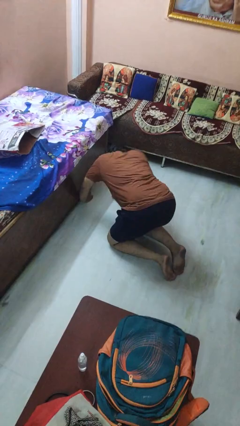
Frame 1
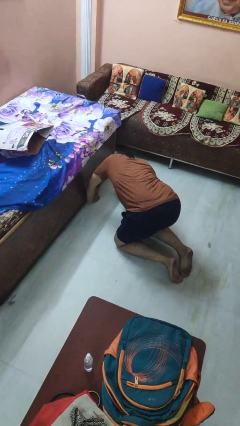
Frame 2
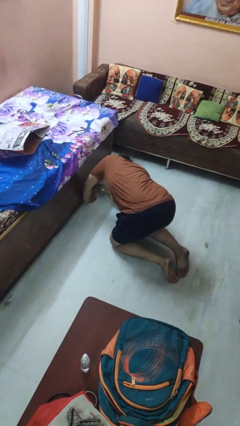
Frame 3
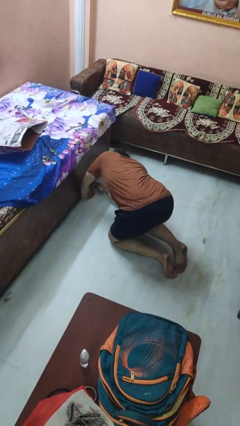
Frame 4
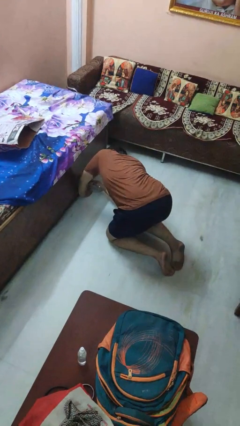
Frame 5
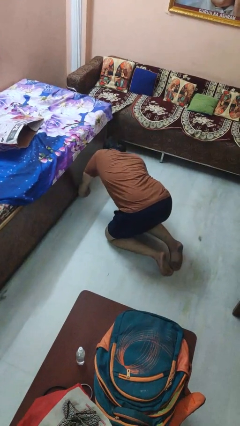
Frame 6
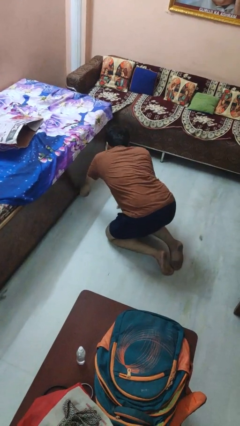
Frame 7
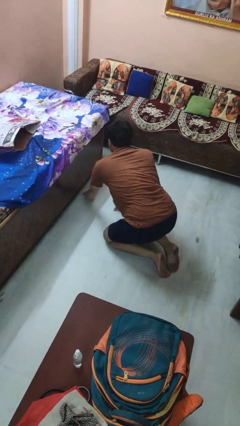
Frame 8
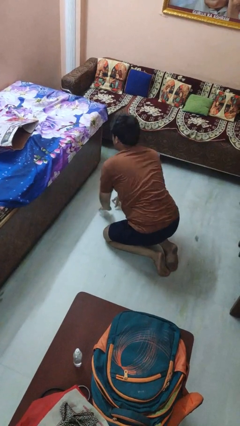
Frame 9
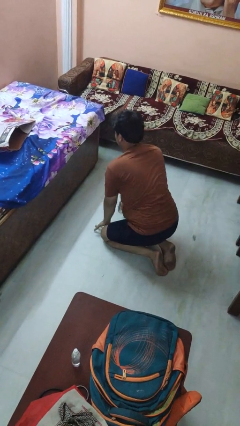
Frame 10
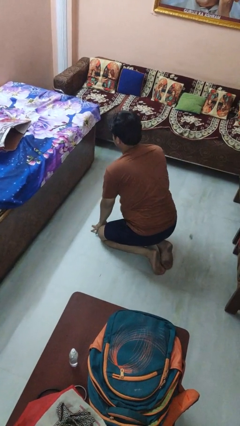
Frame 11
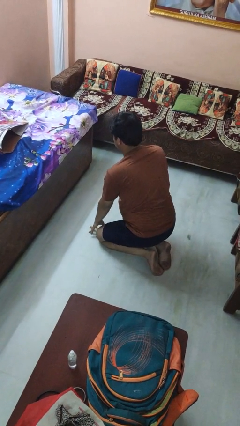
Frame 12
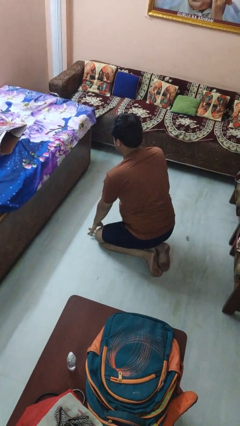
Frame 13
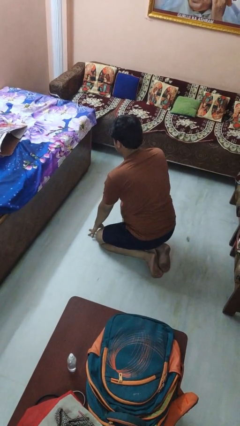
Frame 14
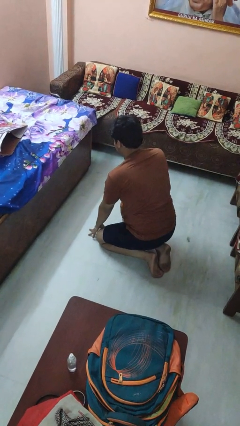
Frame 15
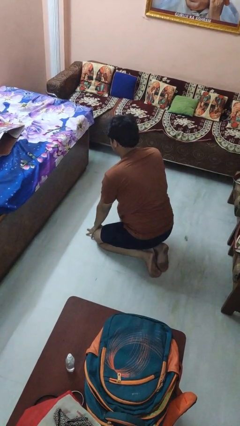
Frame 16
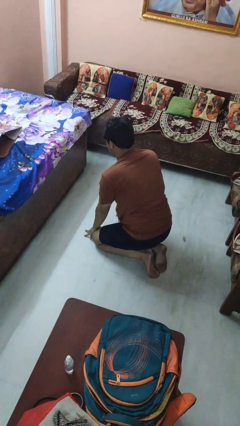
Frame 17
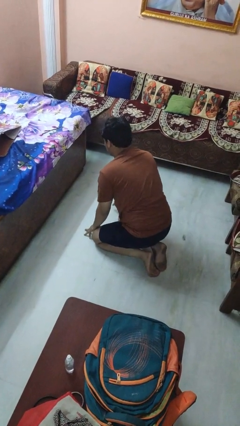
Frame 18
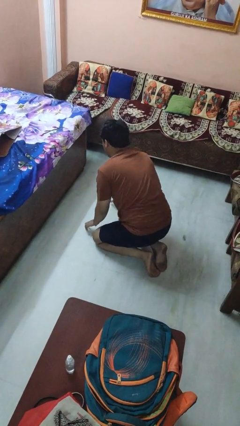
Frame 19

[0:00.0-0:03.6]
person searches under bed

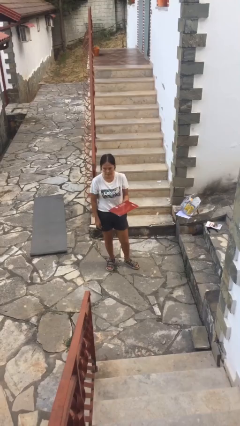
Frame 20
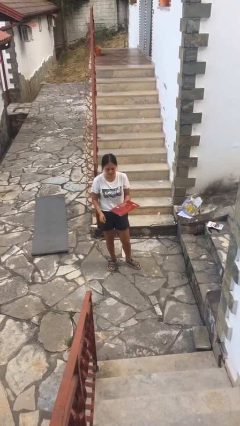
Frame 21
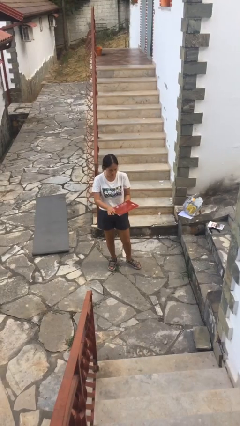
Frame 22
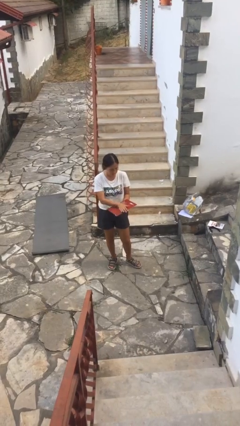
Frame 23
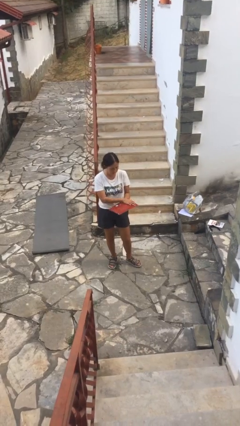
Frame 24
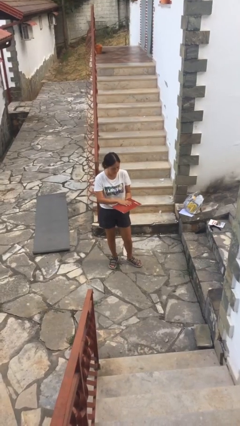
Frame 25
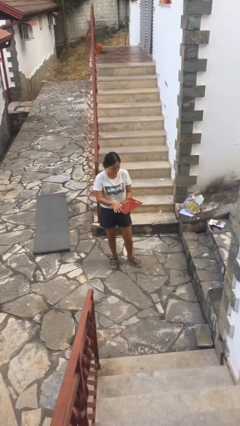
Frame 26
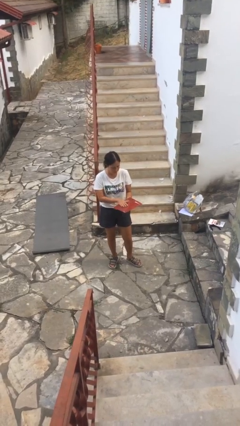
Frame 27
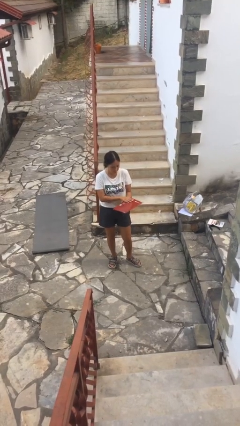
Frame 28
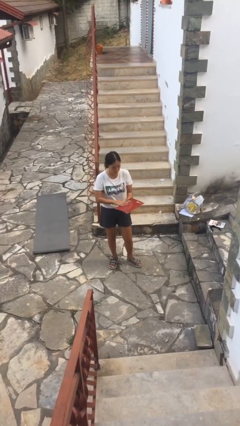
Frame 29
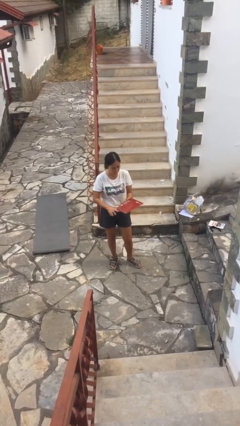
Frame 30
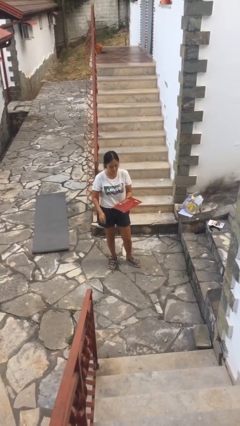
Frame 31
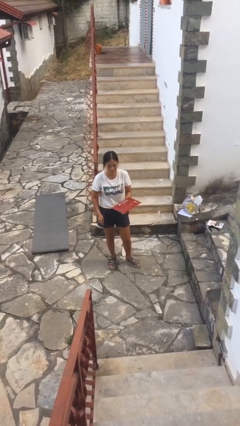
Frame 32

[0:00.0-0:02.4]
person waves hand over object

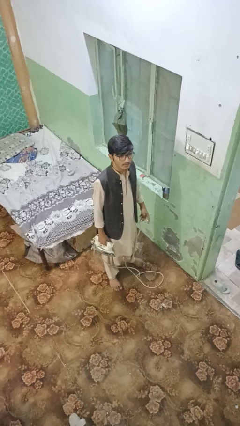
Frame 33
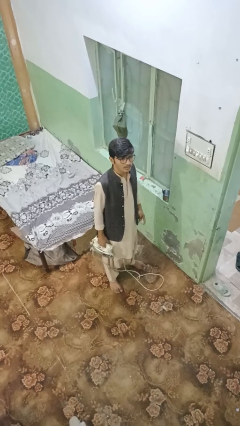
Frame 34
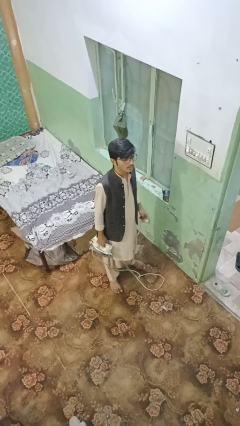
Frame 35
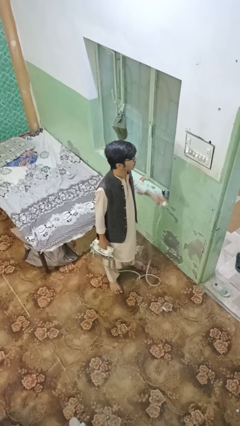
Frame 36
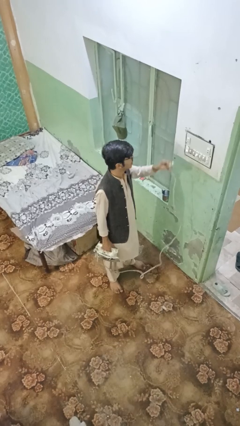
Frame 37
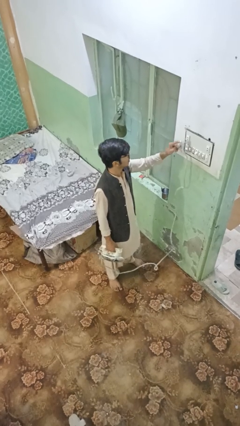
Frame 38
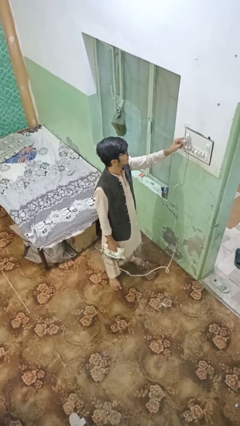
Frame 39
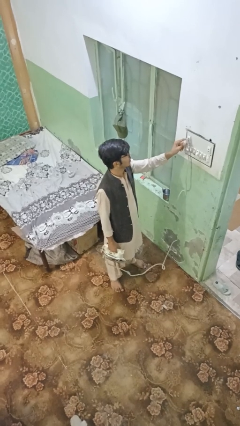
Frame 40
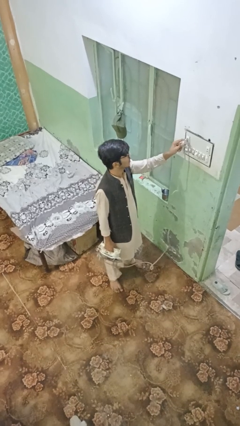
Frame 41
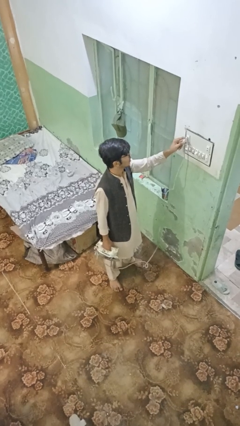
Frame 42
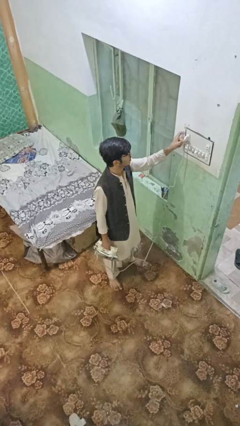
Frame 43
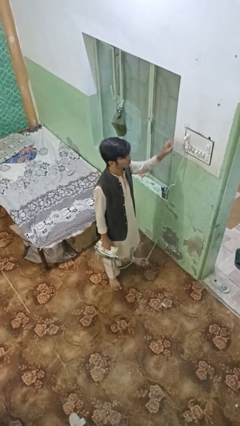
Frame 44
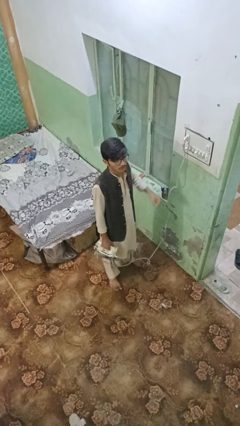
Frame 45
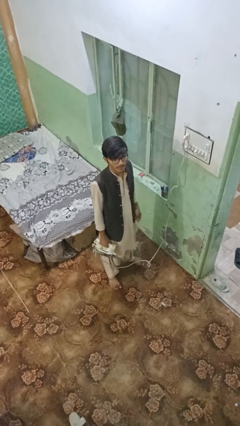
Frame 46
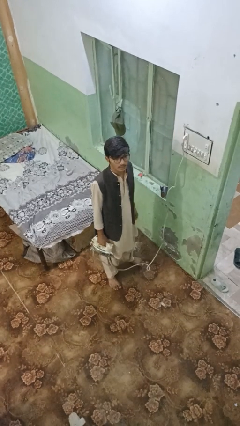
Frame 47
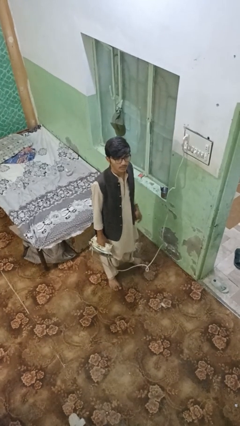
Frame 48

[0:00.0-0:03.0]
person plugs into electrical socket

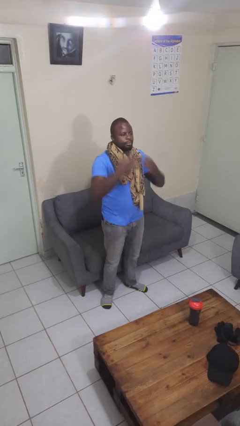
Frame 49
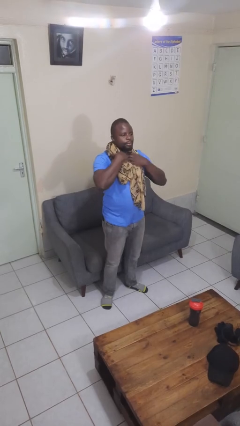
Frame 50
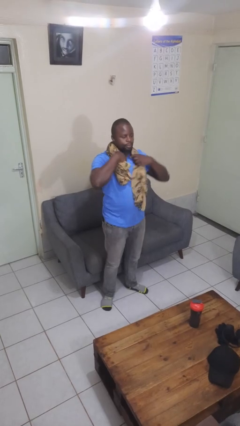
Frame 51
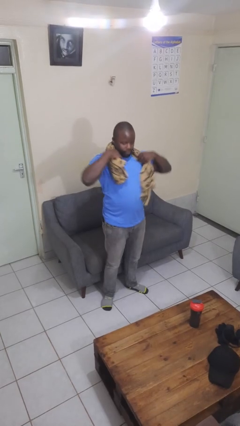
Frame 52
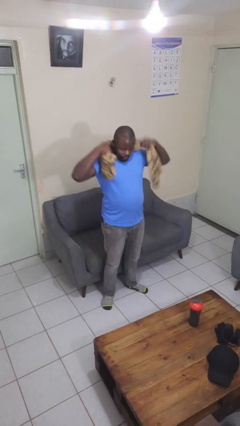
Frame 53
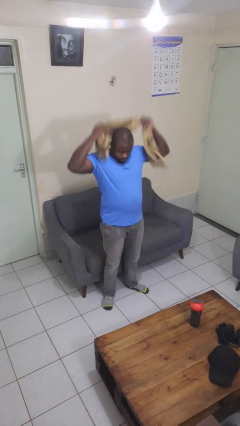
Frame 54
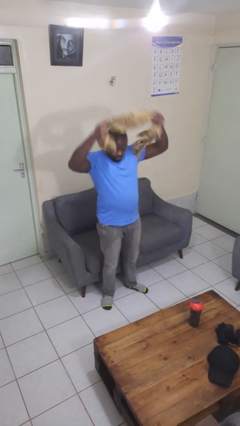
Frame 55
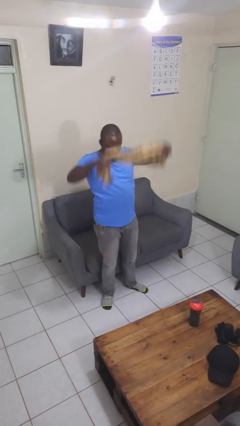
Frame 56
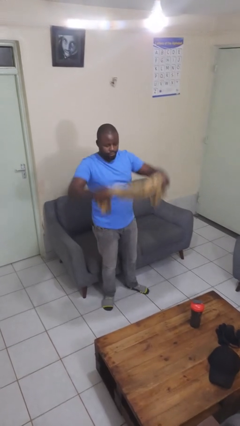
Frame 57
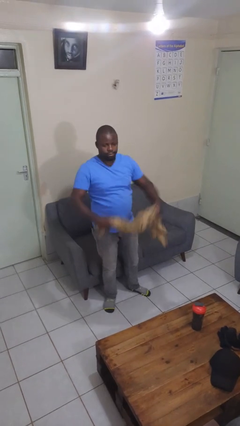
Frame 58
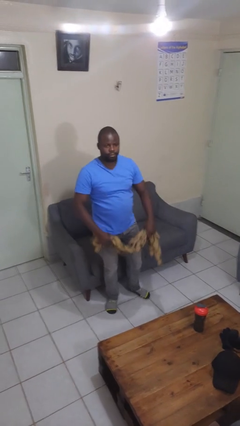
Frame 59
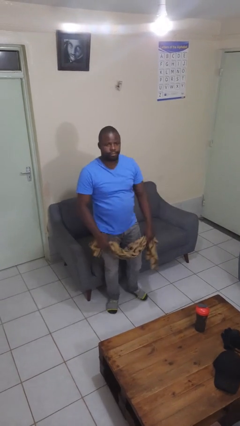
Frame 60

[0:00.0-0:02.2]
person takes off scarf

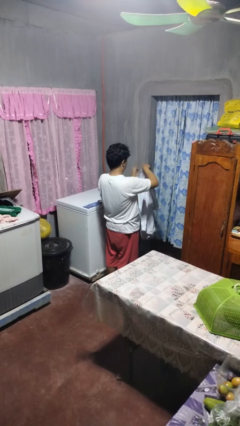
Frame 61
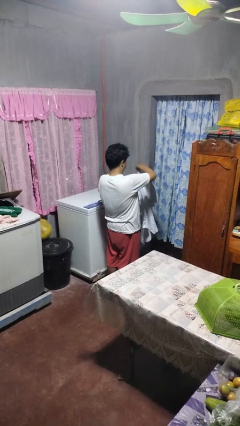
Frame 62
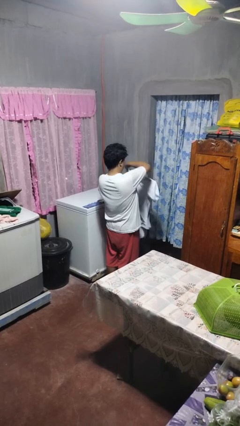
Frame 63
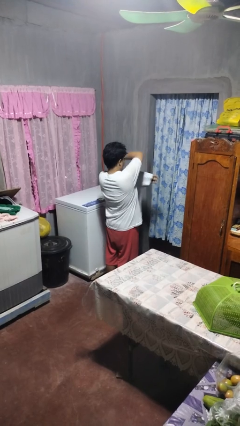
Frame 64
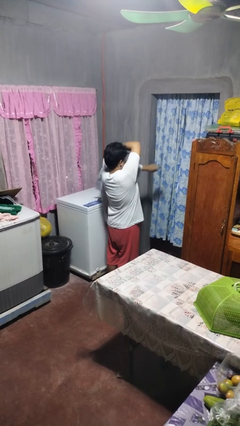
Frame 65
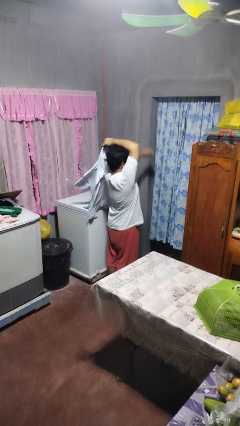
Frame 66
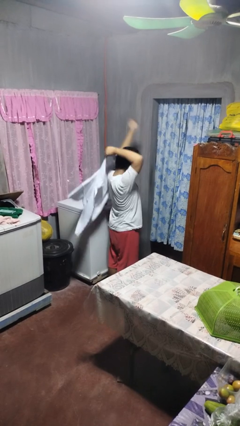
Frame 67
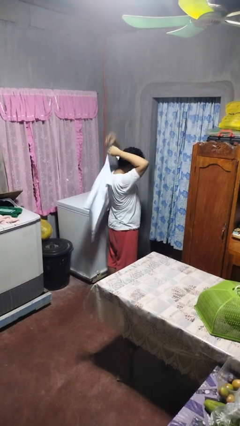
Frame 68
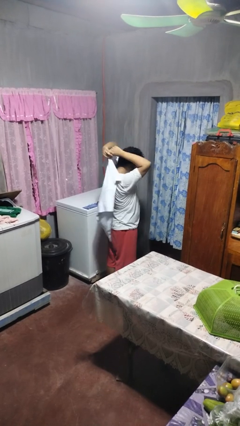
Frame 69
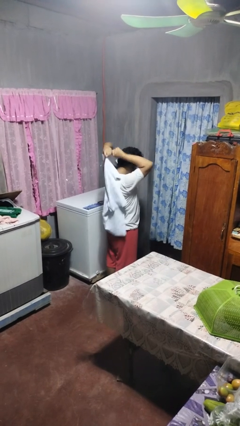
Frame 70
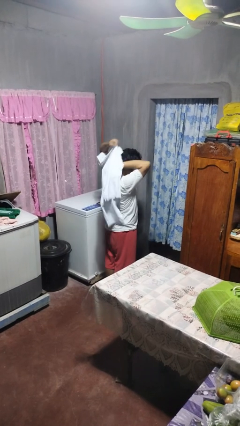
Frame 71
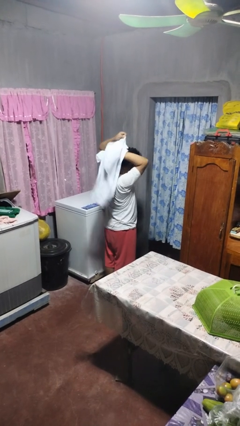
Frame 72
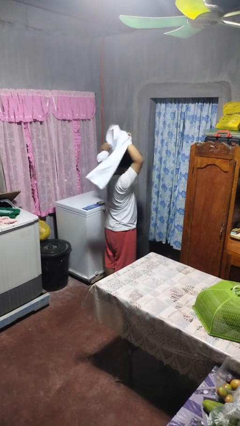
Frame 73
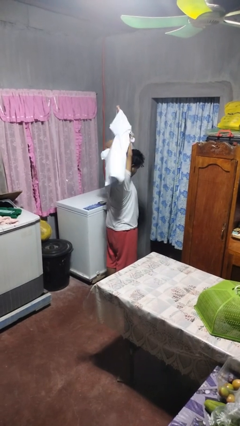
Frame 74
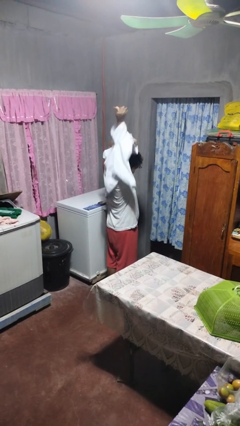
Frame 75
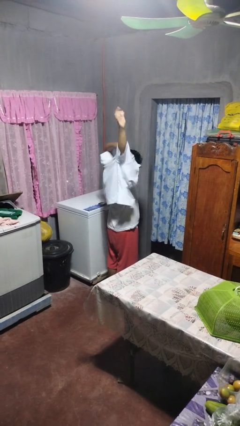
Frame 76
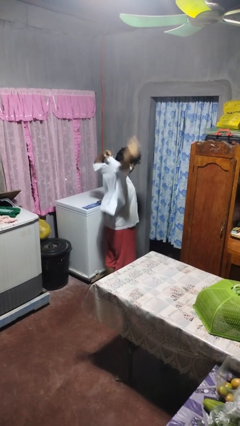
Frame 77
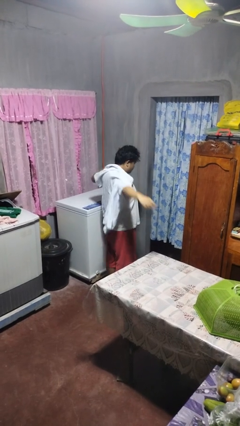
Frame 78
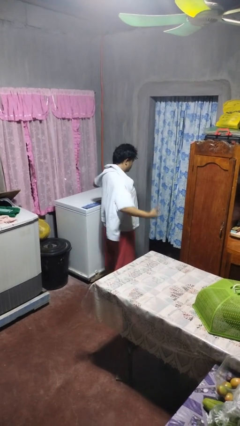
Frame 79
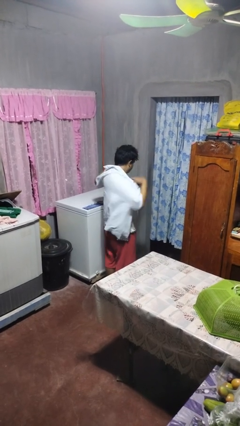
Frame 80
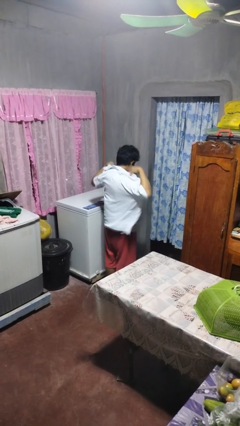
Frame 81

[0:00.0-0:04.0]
person puts on shirt

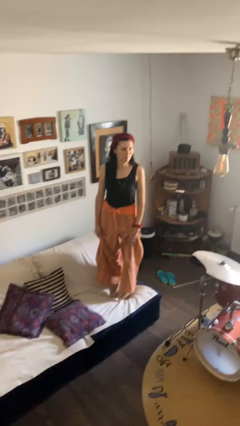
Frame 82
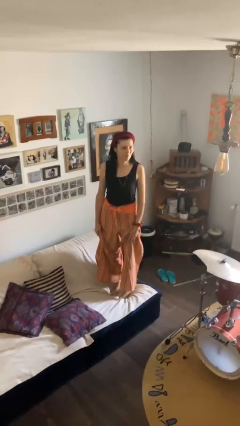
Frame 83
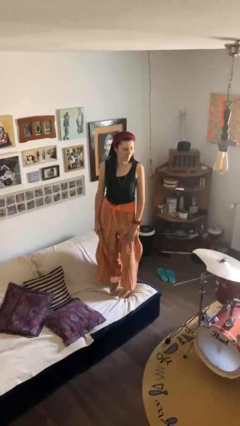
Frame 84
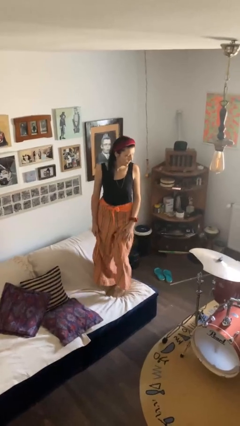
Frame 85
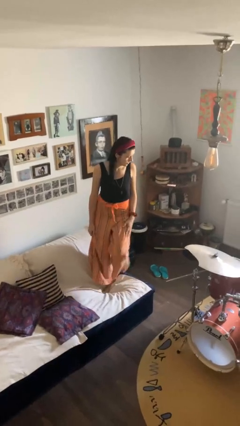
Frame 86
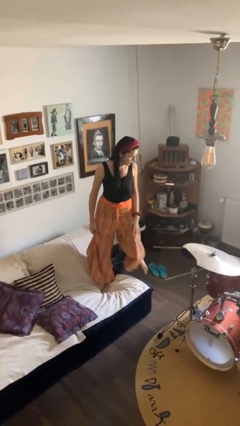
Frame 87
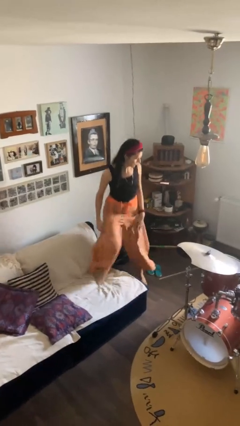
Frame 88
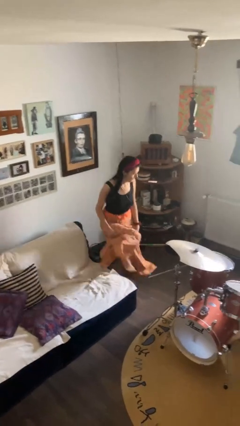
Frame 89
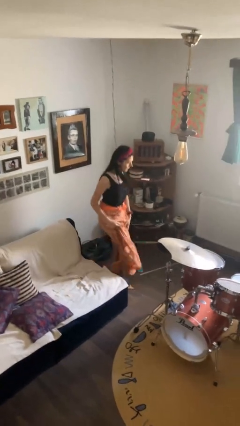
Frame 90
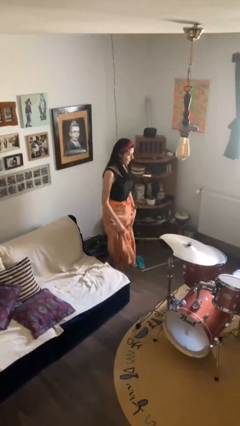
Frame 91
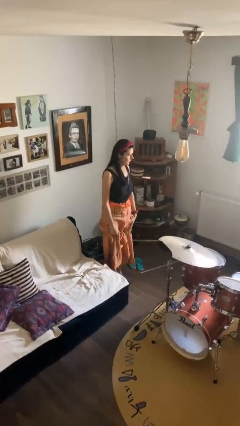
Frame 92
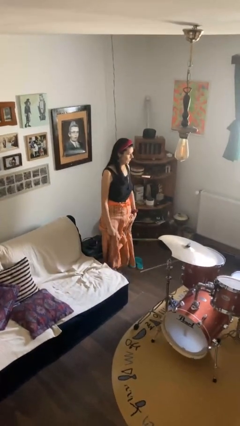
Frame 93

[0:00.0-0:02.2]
person climbs off couch
